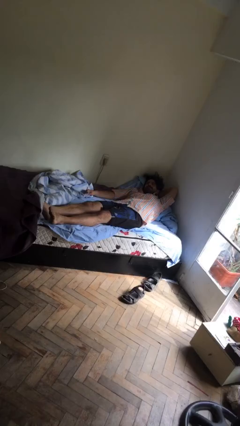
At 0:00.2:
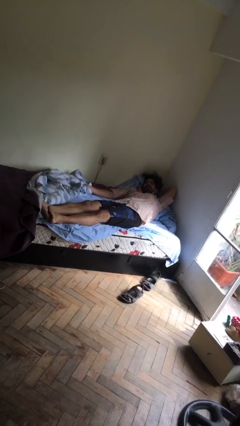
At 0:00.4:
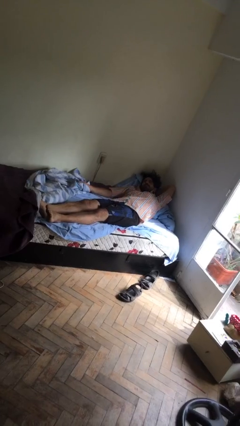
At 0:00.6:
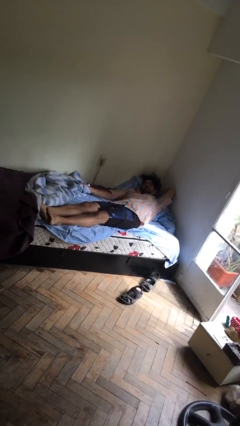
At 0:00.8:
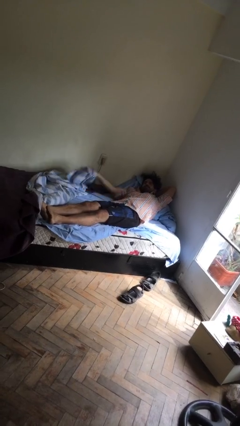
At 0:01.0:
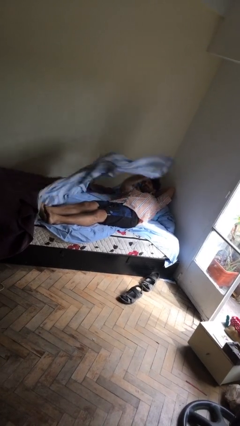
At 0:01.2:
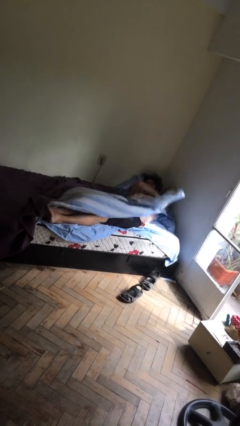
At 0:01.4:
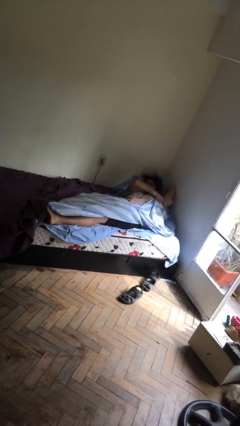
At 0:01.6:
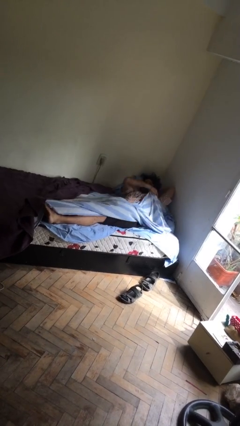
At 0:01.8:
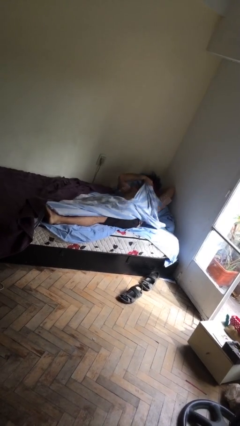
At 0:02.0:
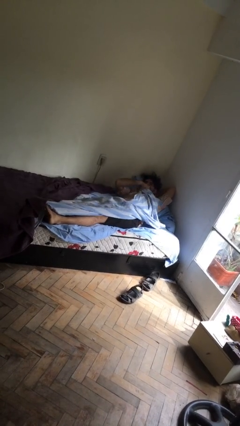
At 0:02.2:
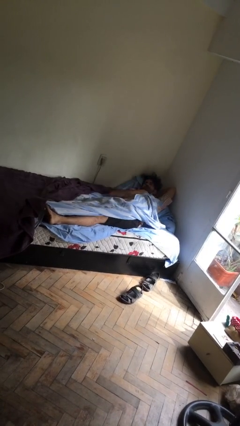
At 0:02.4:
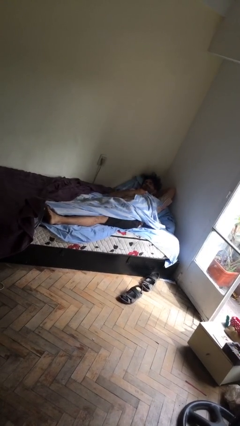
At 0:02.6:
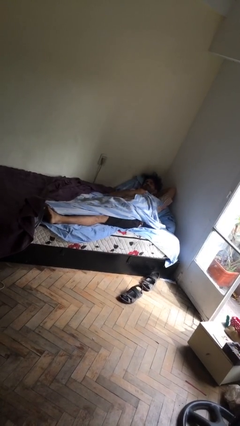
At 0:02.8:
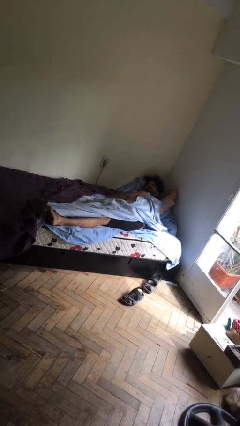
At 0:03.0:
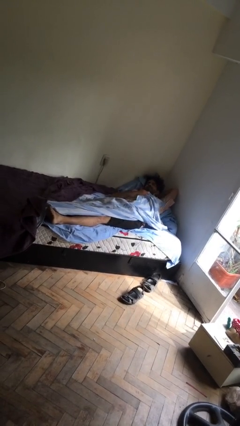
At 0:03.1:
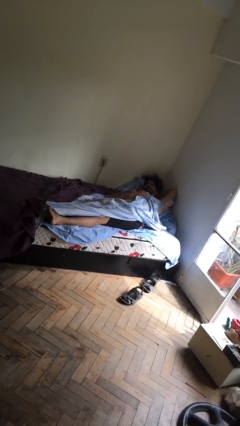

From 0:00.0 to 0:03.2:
person covers with bedsheets

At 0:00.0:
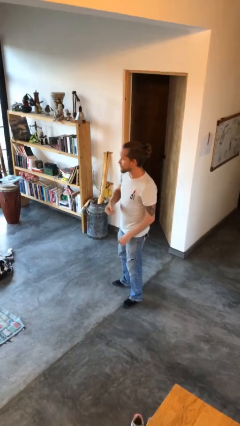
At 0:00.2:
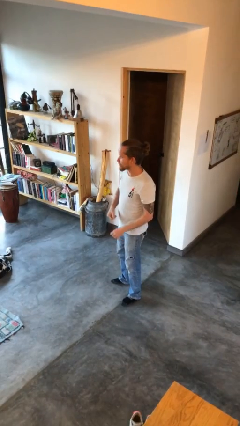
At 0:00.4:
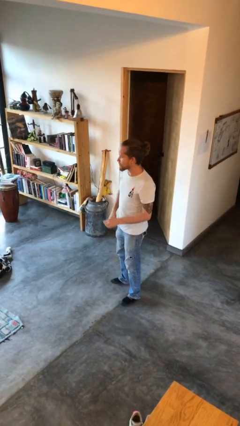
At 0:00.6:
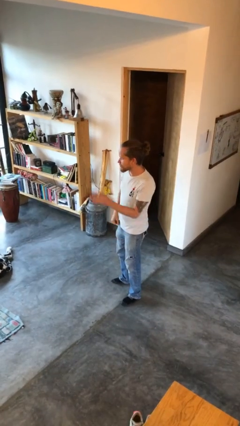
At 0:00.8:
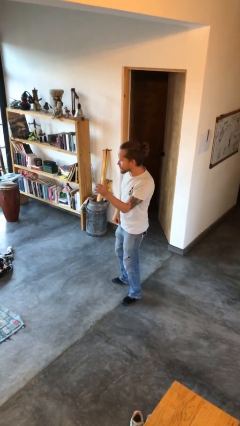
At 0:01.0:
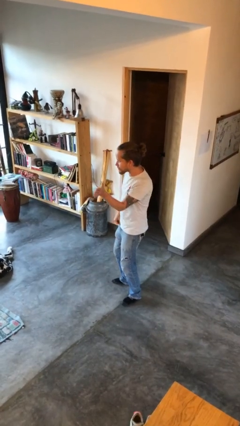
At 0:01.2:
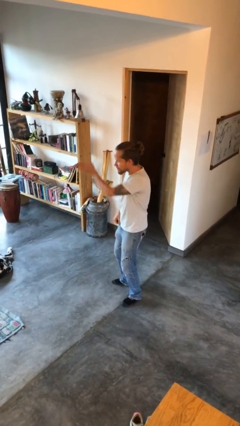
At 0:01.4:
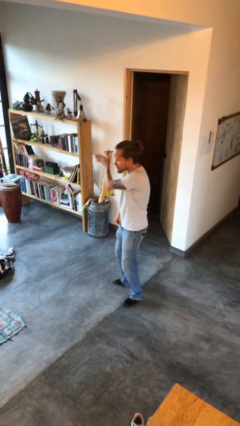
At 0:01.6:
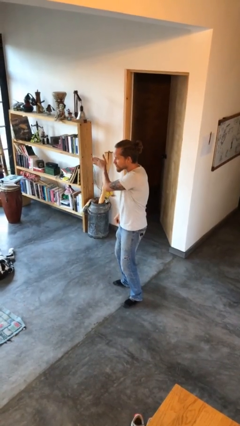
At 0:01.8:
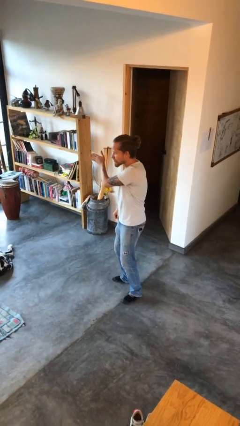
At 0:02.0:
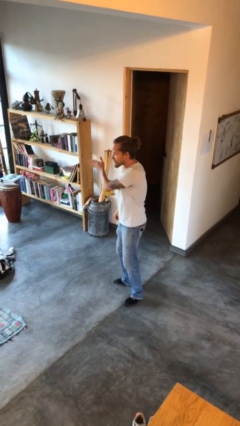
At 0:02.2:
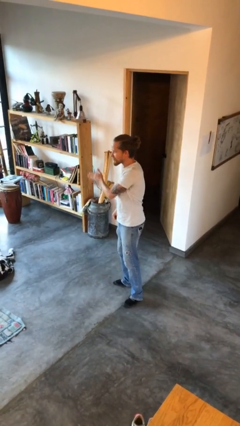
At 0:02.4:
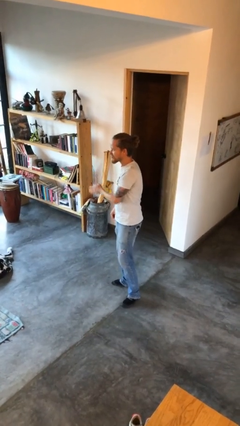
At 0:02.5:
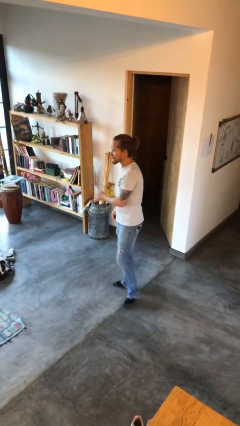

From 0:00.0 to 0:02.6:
person gestures swipe right

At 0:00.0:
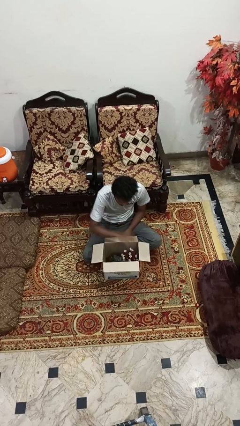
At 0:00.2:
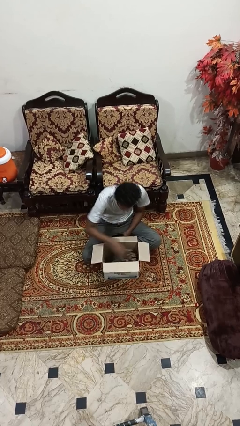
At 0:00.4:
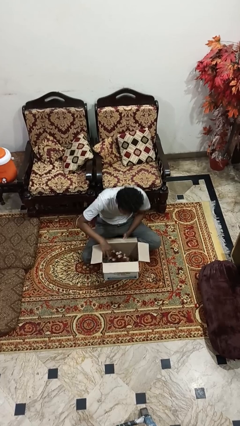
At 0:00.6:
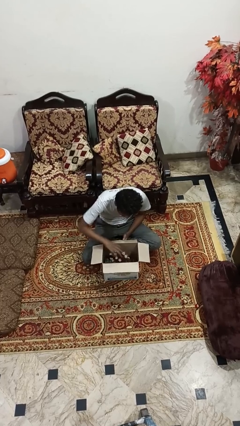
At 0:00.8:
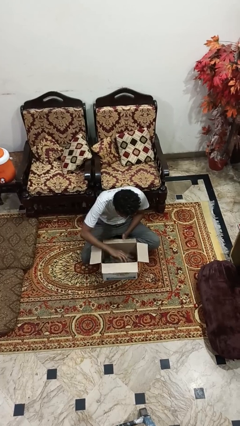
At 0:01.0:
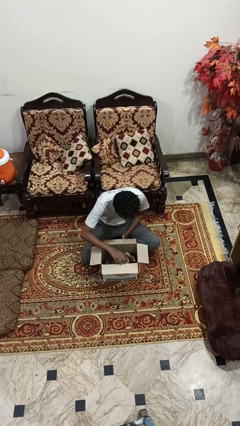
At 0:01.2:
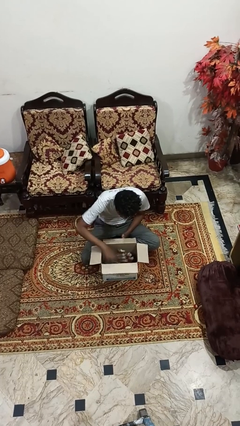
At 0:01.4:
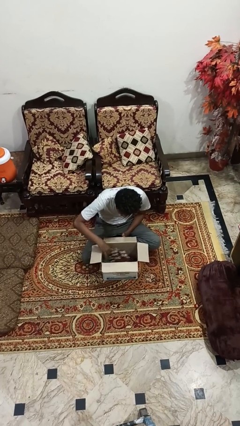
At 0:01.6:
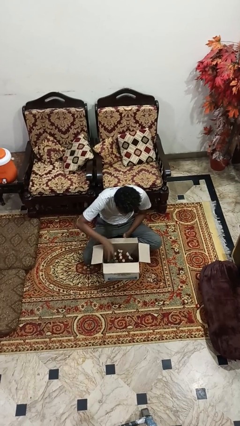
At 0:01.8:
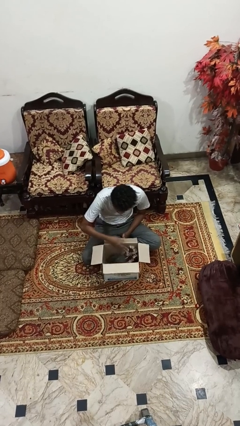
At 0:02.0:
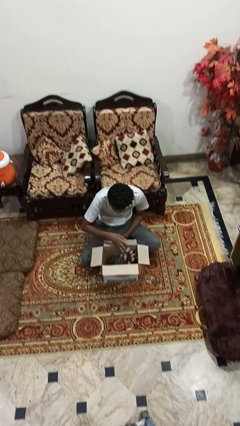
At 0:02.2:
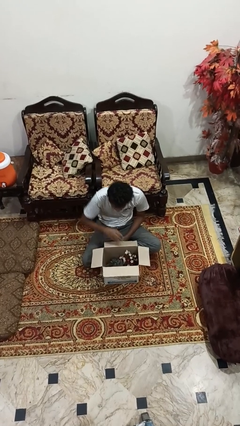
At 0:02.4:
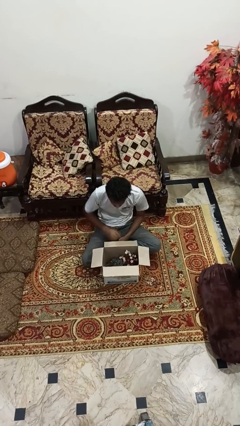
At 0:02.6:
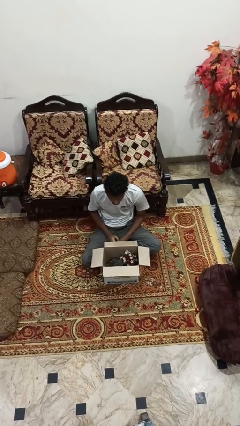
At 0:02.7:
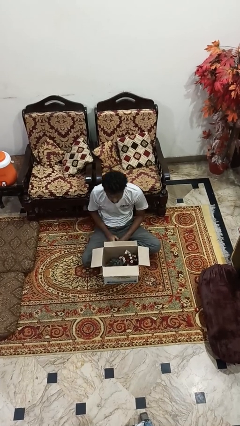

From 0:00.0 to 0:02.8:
person searches in box

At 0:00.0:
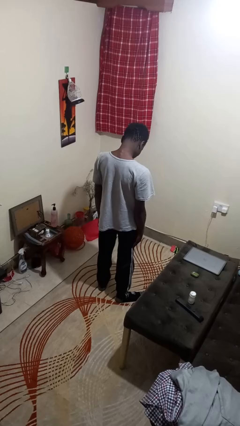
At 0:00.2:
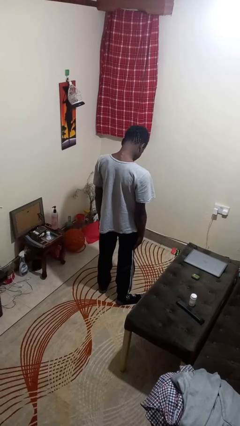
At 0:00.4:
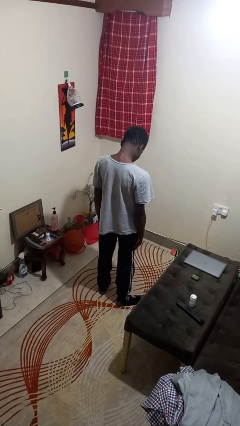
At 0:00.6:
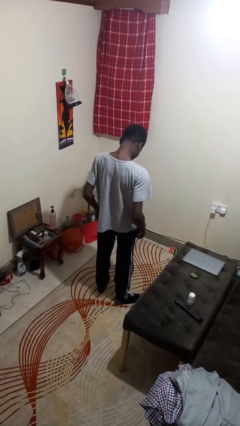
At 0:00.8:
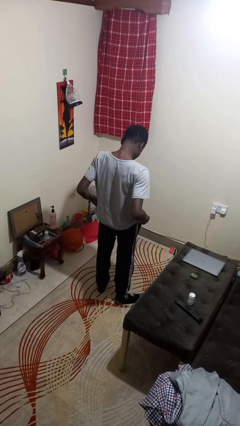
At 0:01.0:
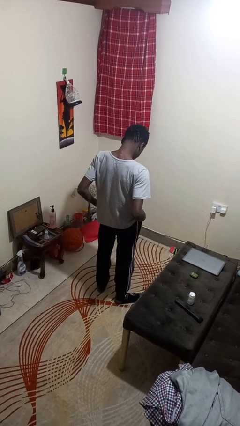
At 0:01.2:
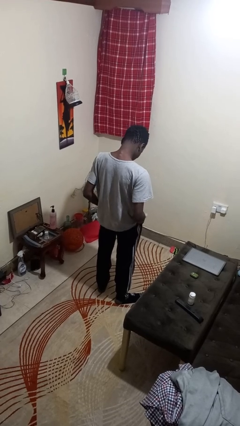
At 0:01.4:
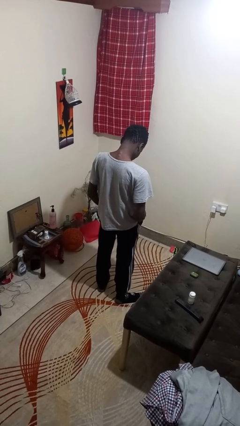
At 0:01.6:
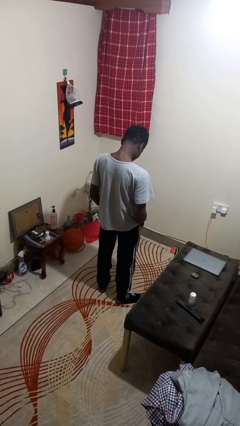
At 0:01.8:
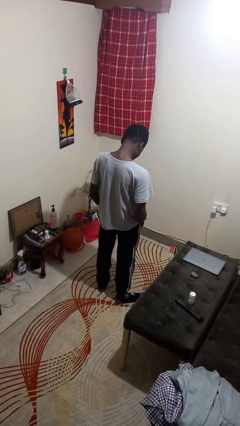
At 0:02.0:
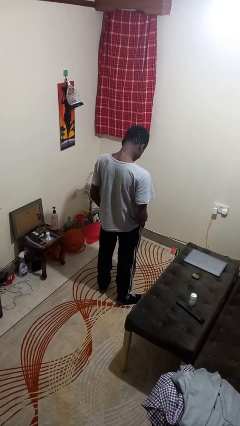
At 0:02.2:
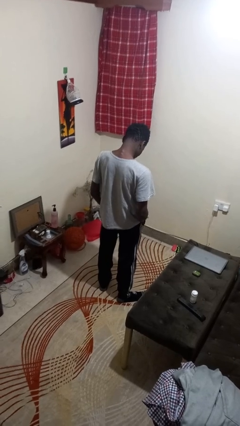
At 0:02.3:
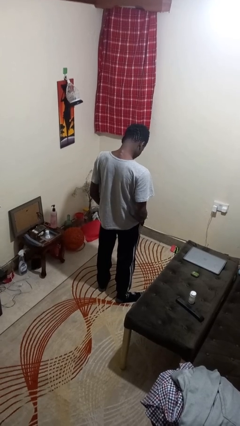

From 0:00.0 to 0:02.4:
person puts hands in back pockets

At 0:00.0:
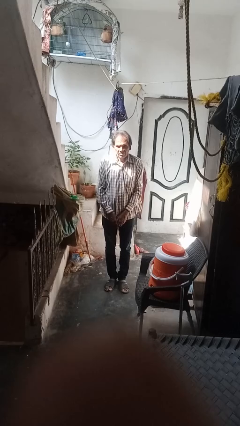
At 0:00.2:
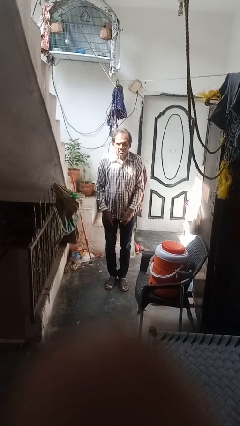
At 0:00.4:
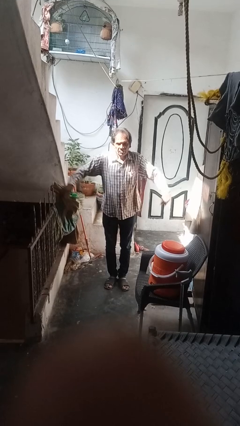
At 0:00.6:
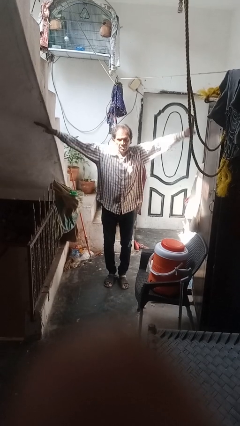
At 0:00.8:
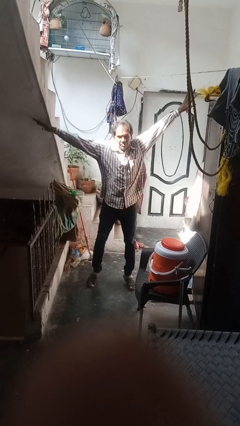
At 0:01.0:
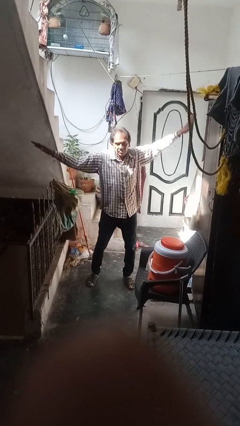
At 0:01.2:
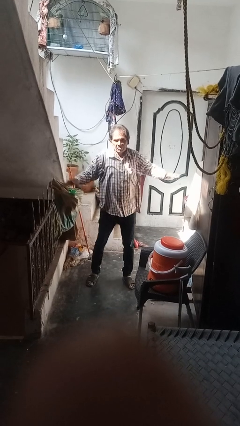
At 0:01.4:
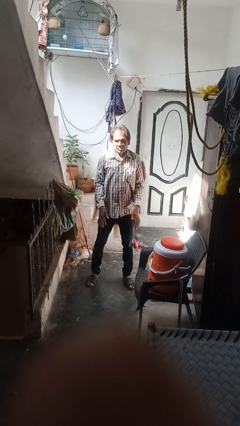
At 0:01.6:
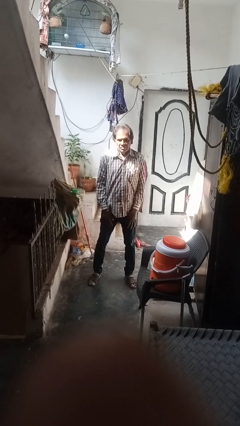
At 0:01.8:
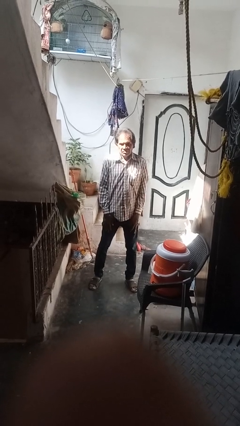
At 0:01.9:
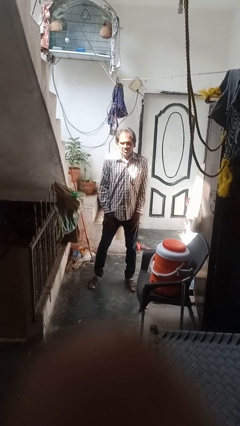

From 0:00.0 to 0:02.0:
person exercises with jumping jacks

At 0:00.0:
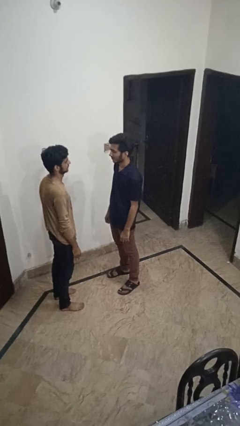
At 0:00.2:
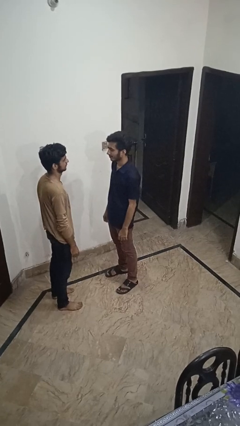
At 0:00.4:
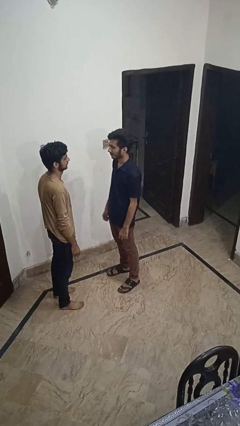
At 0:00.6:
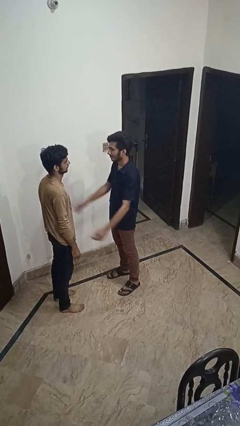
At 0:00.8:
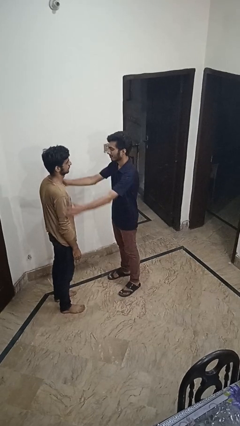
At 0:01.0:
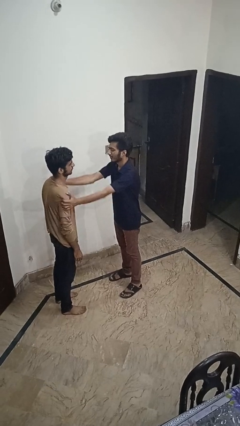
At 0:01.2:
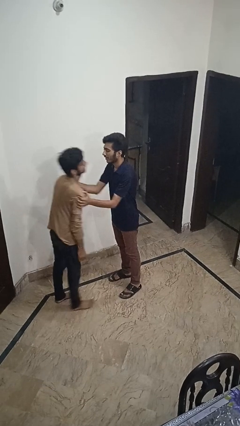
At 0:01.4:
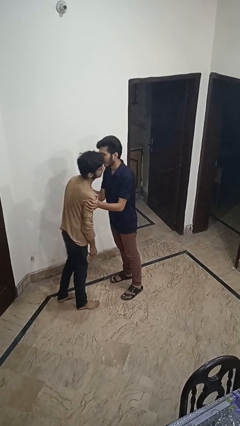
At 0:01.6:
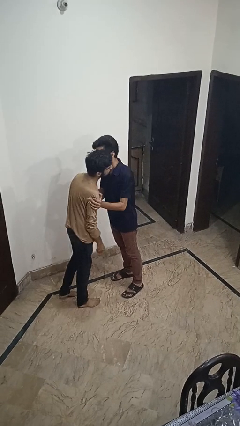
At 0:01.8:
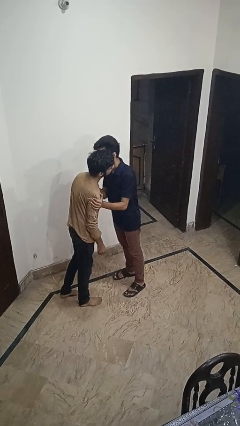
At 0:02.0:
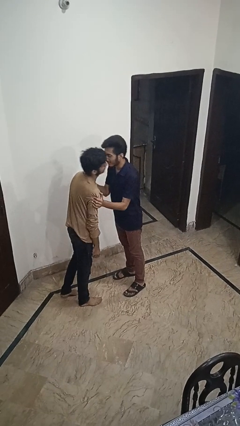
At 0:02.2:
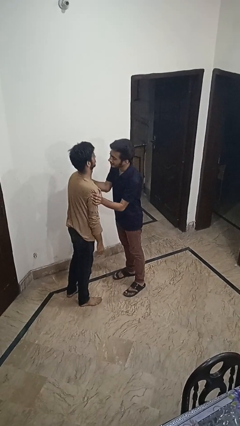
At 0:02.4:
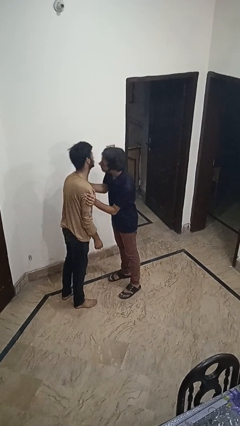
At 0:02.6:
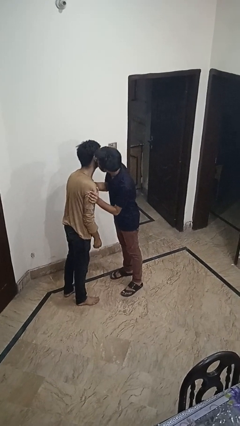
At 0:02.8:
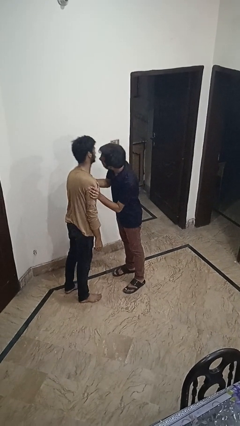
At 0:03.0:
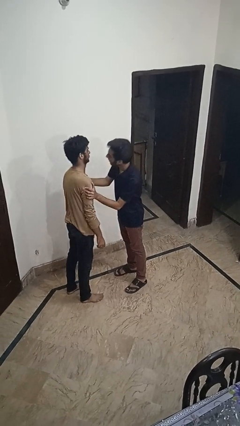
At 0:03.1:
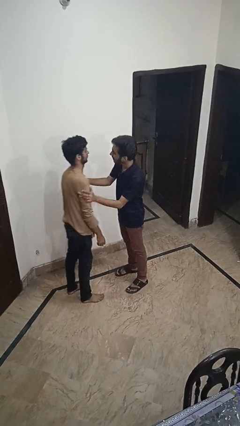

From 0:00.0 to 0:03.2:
person kisses cheek of person

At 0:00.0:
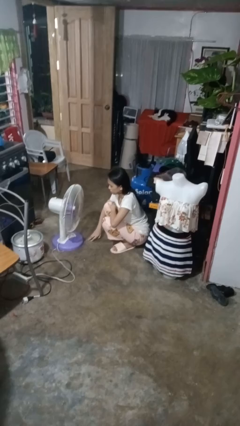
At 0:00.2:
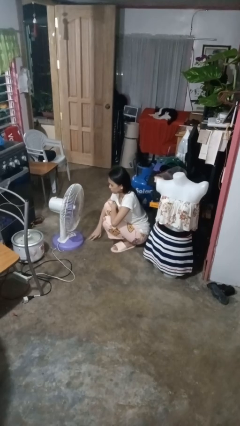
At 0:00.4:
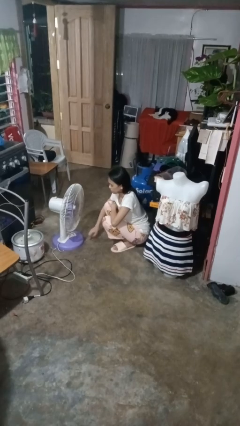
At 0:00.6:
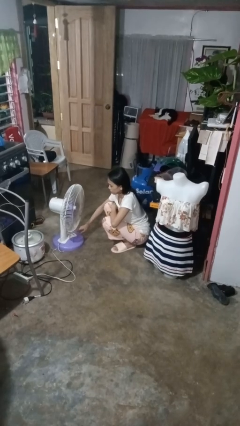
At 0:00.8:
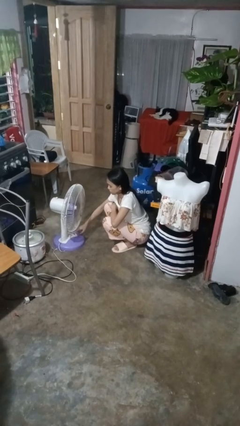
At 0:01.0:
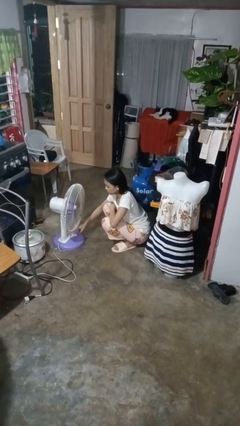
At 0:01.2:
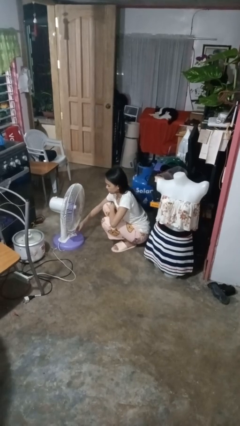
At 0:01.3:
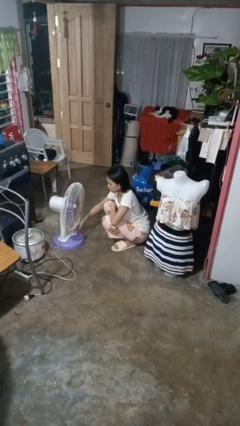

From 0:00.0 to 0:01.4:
person turns on fan
